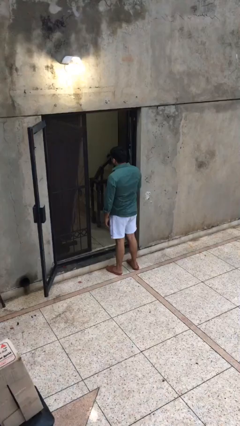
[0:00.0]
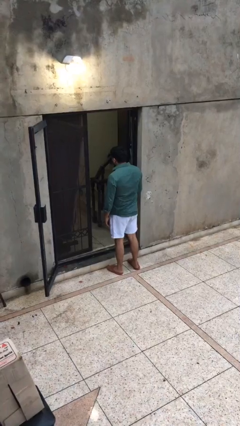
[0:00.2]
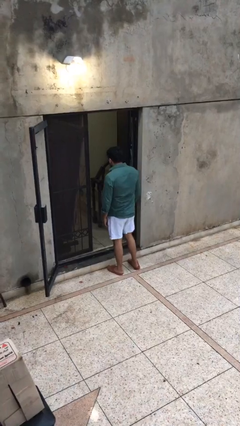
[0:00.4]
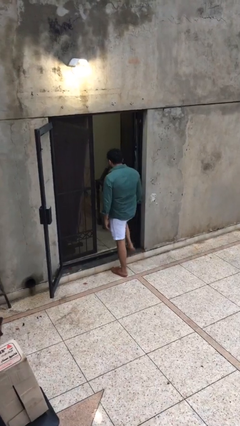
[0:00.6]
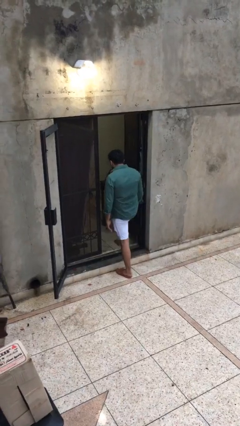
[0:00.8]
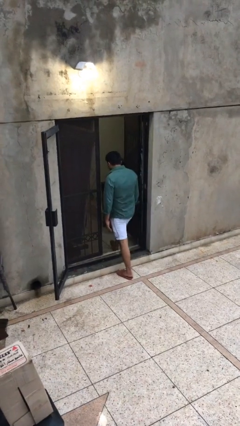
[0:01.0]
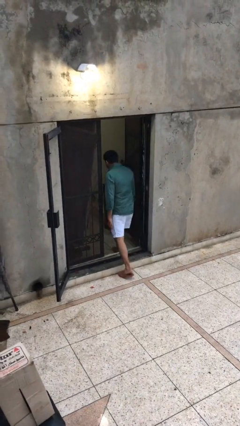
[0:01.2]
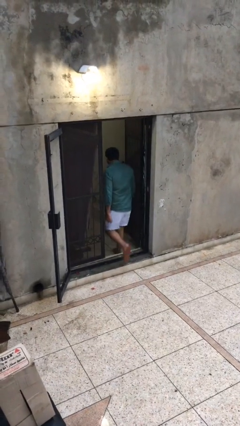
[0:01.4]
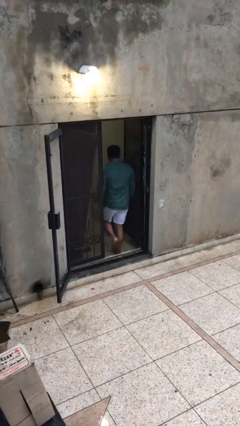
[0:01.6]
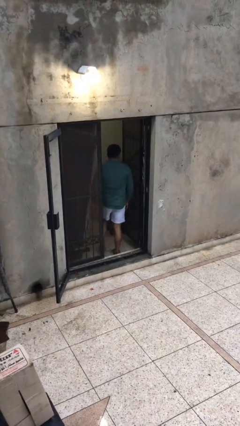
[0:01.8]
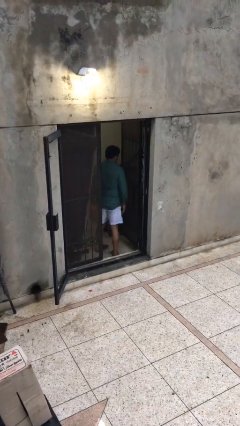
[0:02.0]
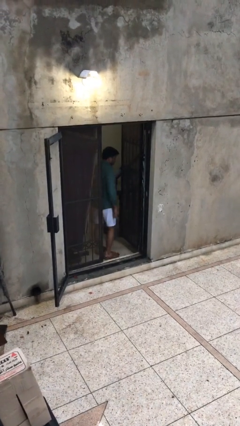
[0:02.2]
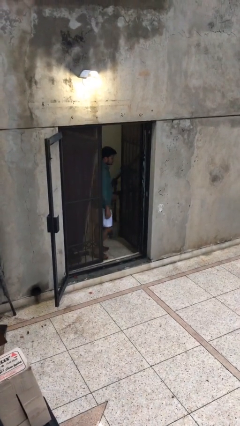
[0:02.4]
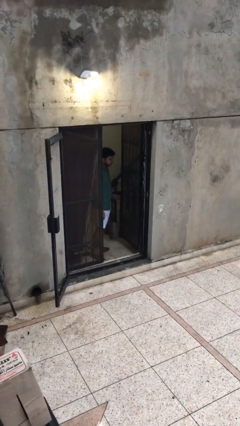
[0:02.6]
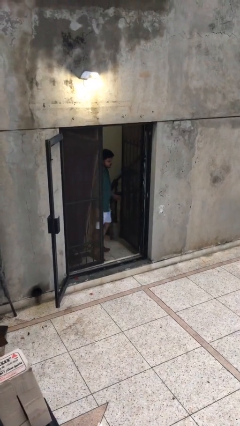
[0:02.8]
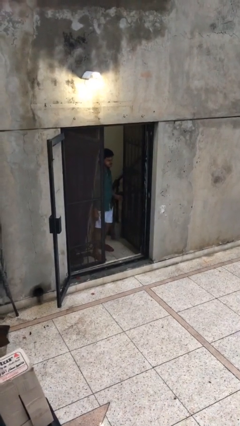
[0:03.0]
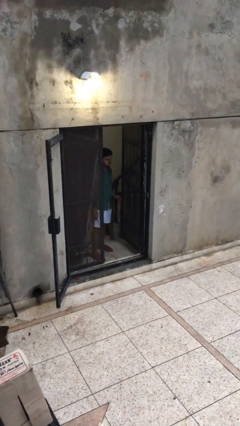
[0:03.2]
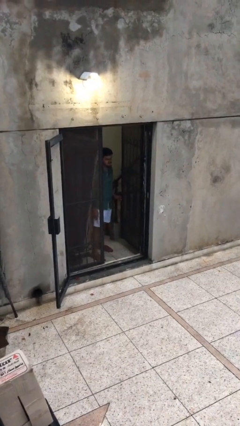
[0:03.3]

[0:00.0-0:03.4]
person exits scene through structure

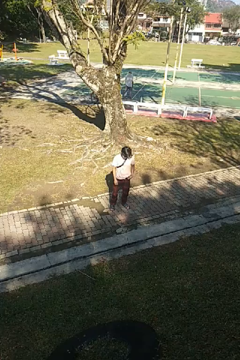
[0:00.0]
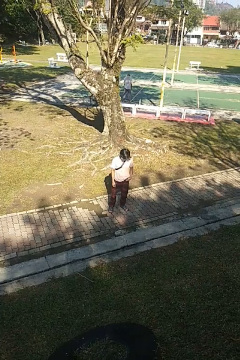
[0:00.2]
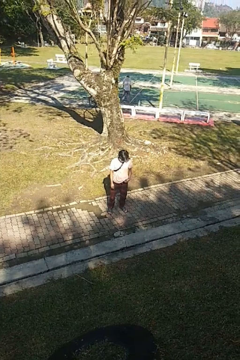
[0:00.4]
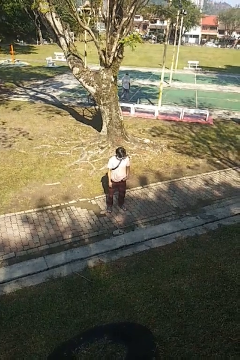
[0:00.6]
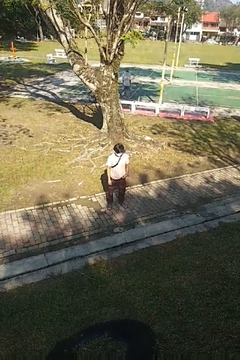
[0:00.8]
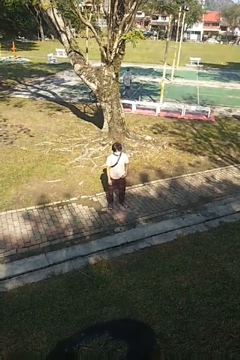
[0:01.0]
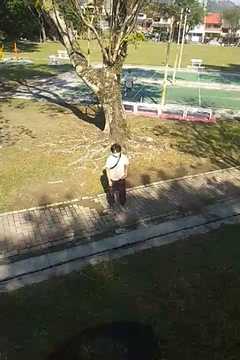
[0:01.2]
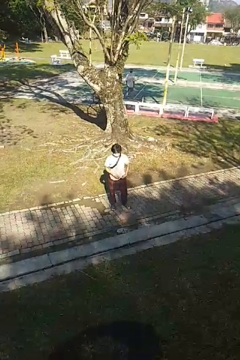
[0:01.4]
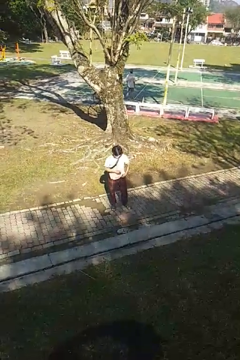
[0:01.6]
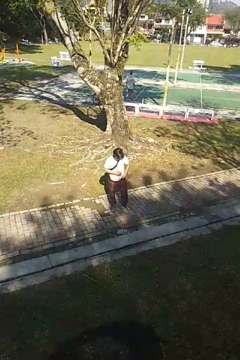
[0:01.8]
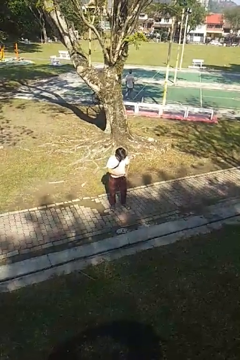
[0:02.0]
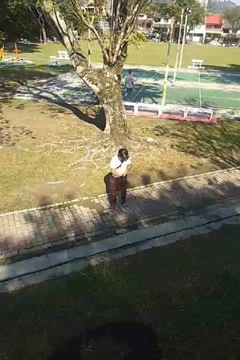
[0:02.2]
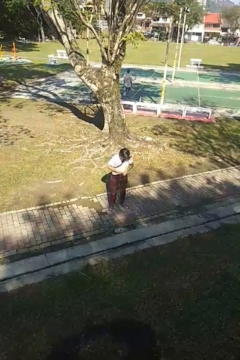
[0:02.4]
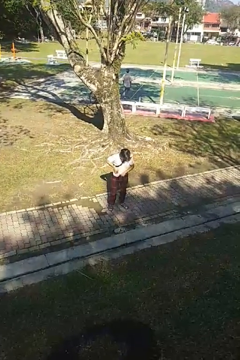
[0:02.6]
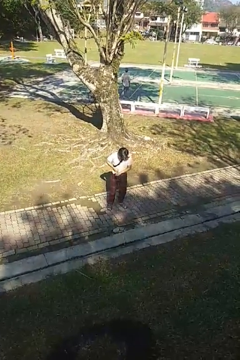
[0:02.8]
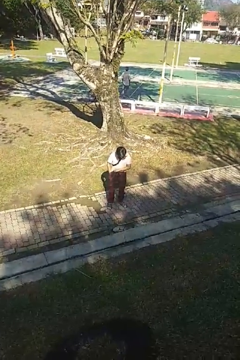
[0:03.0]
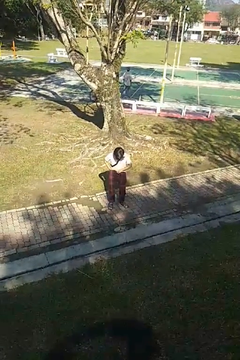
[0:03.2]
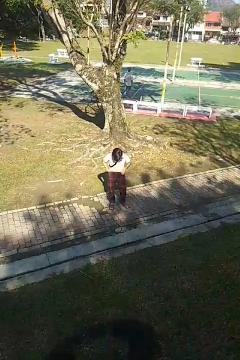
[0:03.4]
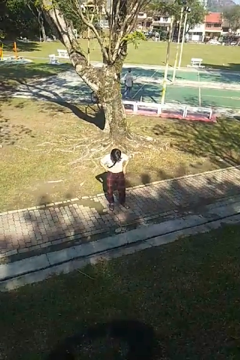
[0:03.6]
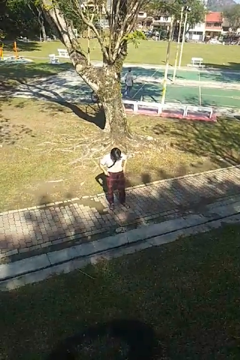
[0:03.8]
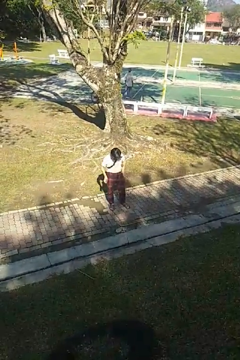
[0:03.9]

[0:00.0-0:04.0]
person tucks in shirt

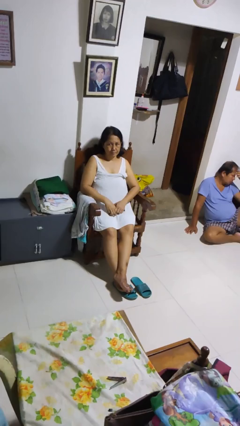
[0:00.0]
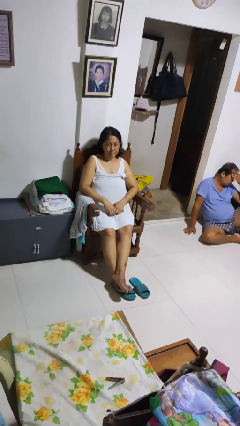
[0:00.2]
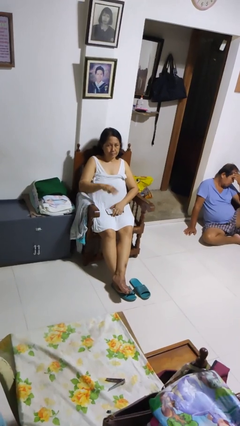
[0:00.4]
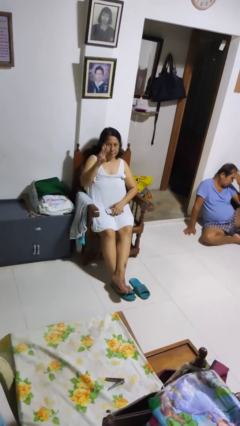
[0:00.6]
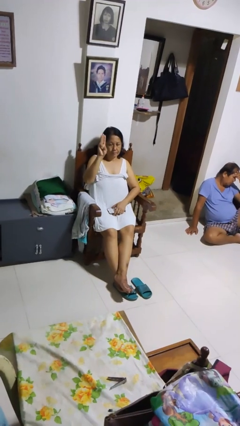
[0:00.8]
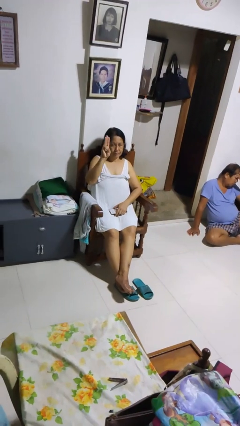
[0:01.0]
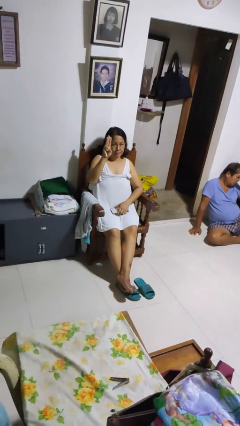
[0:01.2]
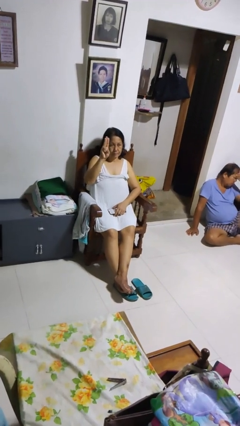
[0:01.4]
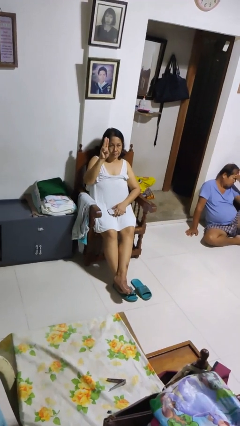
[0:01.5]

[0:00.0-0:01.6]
person gestures number three

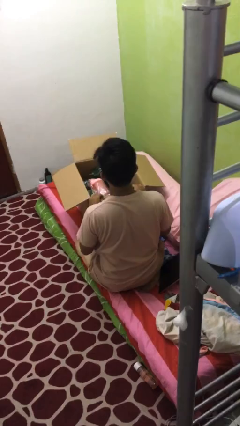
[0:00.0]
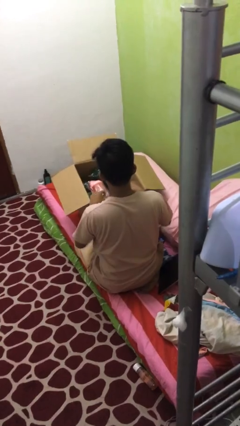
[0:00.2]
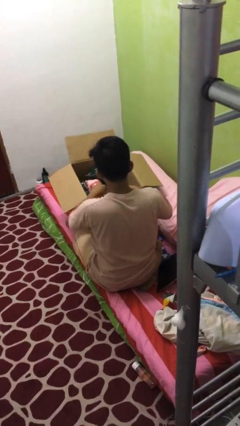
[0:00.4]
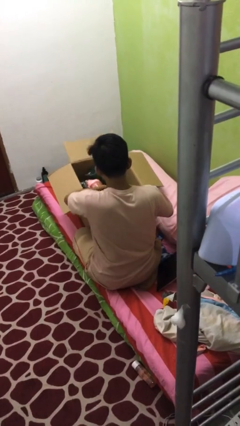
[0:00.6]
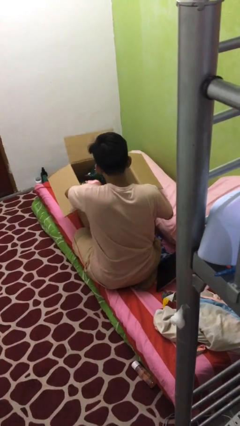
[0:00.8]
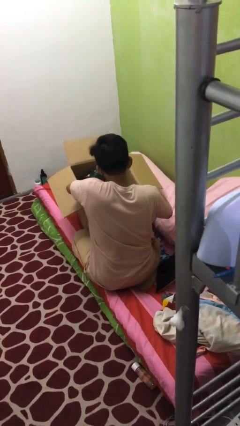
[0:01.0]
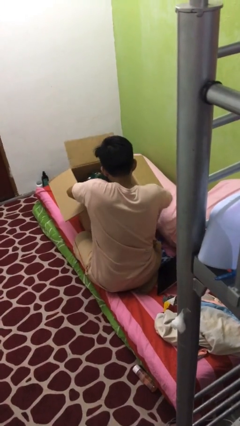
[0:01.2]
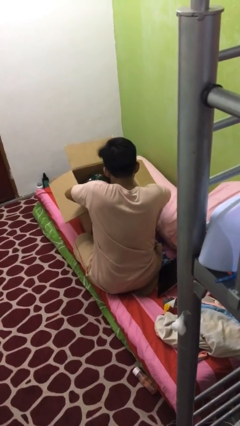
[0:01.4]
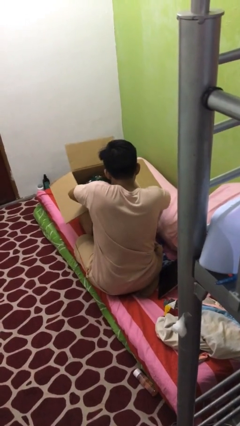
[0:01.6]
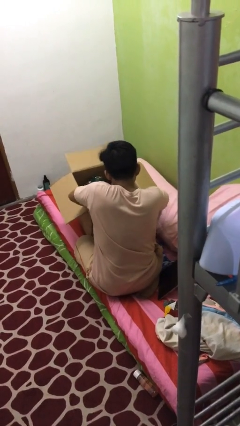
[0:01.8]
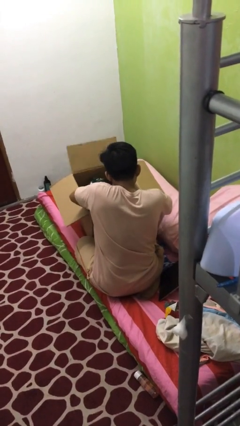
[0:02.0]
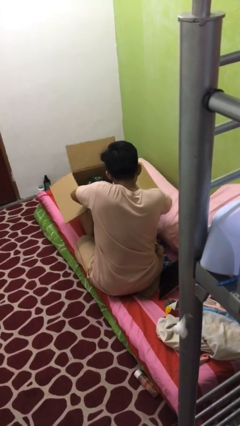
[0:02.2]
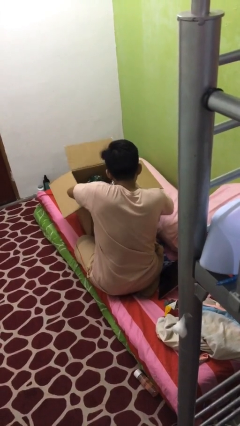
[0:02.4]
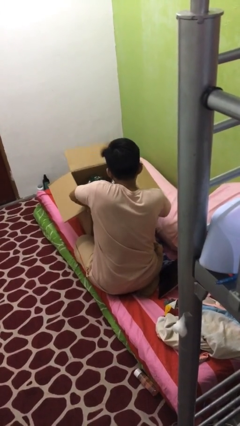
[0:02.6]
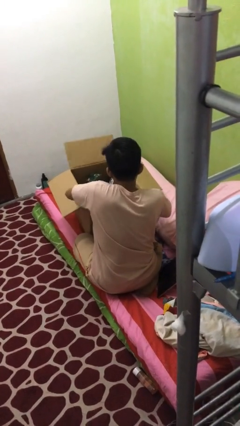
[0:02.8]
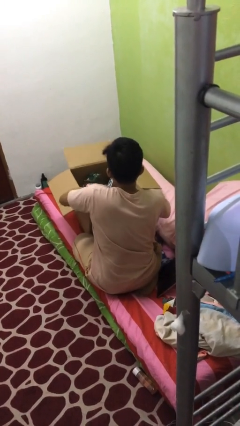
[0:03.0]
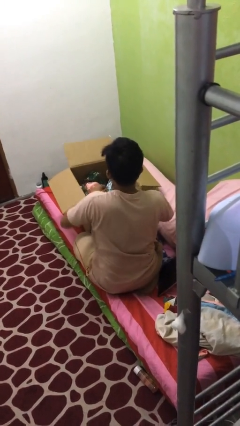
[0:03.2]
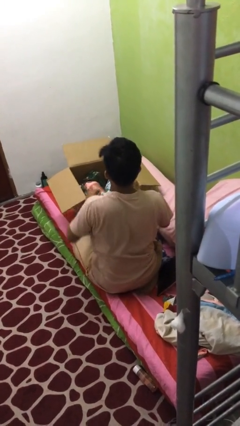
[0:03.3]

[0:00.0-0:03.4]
person searches in box

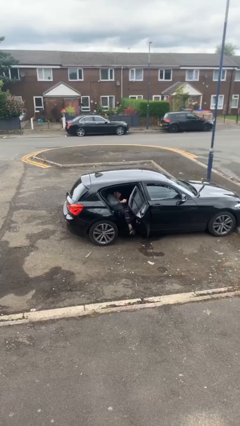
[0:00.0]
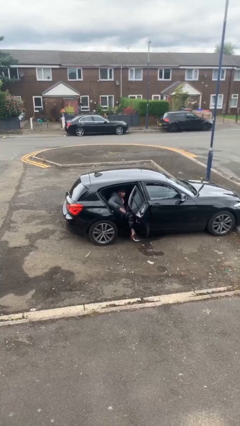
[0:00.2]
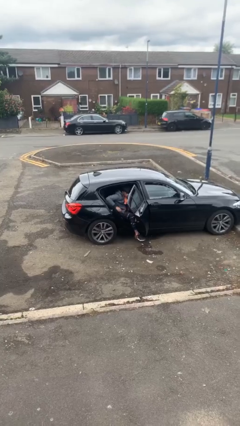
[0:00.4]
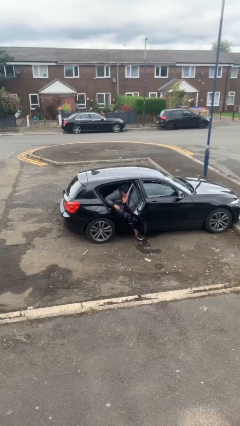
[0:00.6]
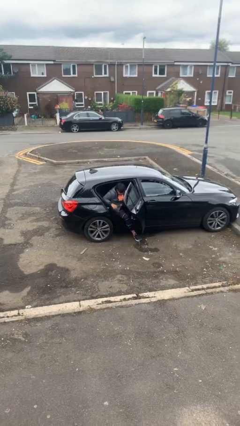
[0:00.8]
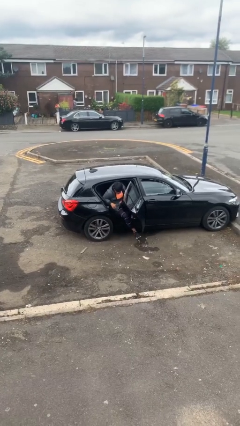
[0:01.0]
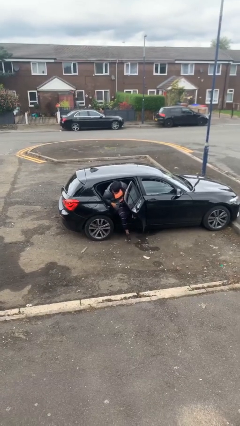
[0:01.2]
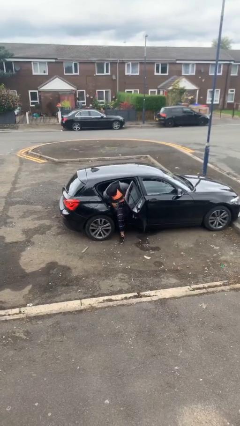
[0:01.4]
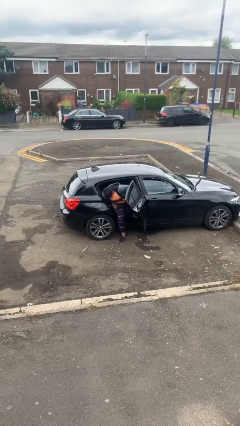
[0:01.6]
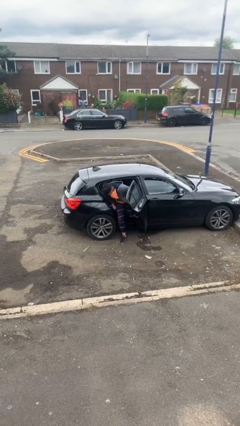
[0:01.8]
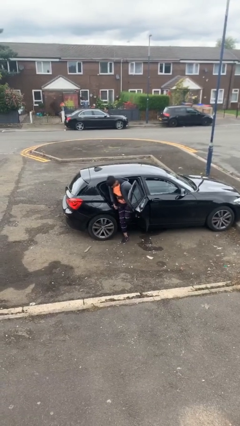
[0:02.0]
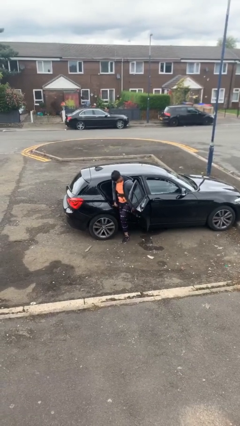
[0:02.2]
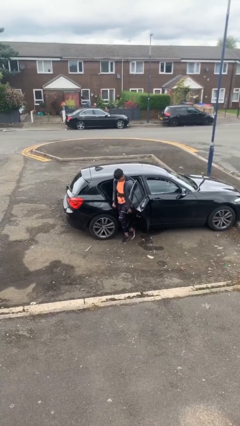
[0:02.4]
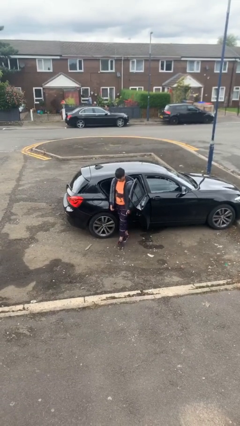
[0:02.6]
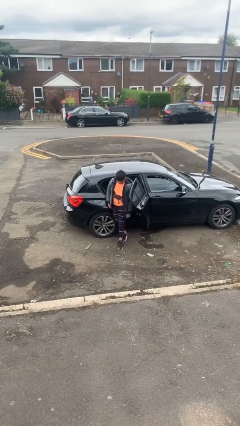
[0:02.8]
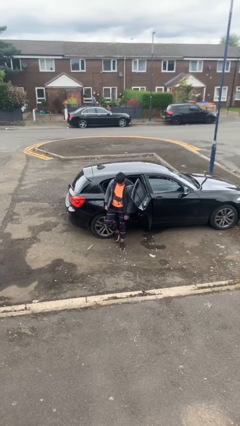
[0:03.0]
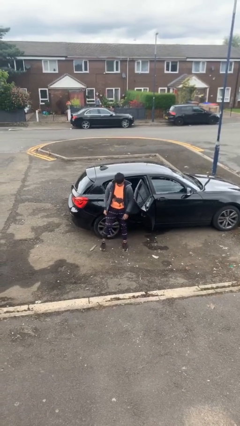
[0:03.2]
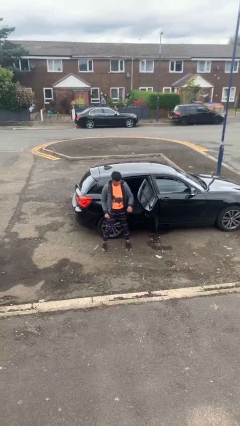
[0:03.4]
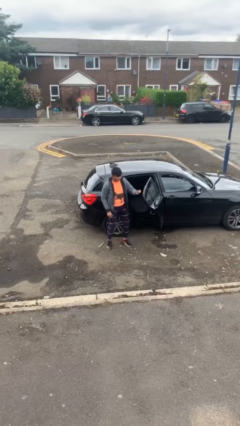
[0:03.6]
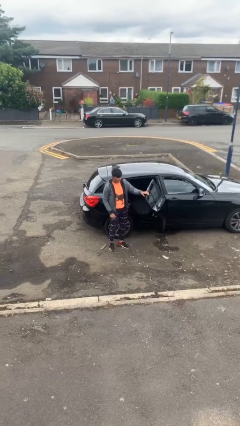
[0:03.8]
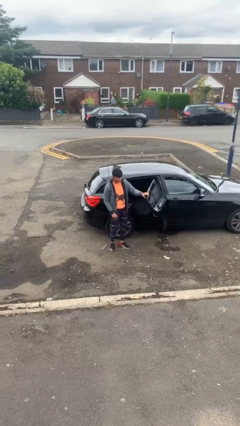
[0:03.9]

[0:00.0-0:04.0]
person exits car

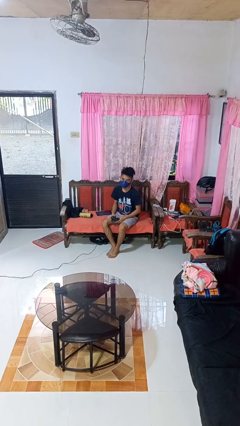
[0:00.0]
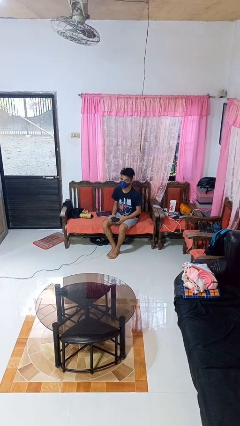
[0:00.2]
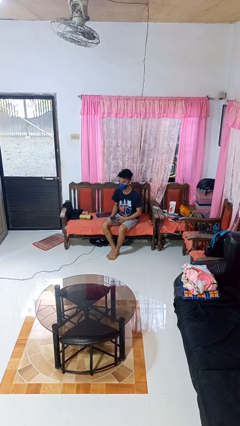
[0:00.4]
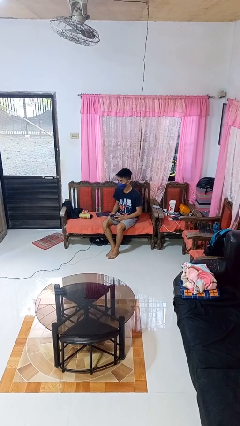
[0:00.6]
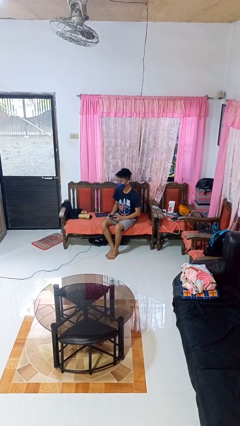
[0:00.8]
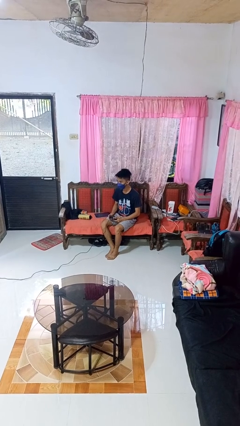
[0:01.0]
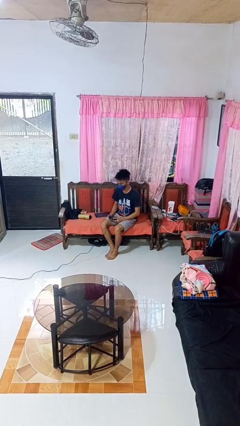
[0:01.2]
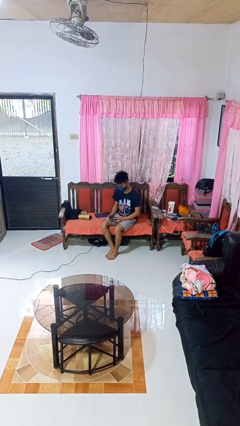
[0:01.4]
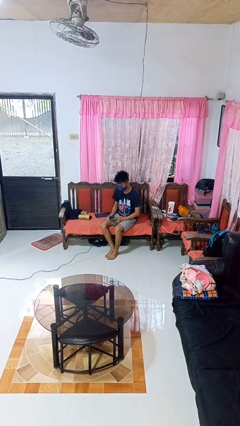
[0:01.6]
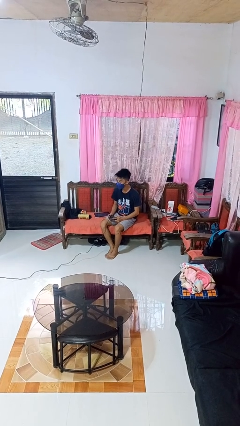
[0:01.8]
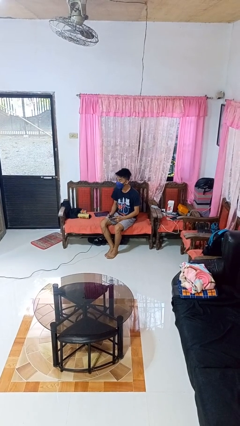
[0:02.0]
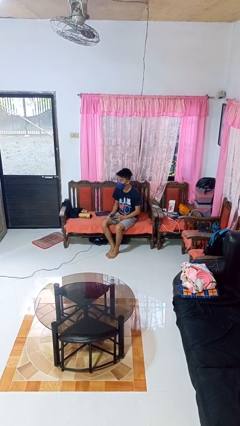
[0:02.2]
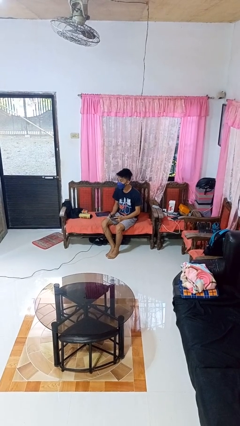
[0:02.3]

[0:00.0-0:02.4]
person interacts with handheld game
